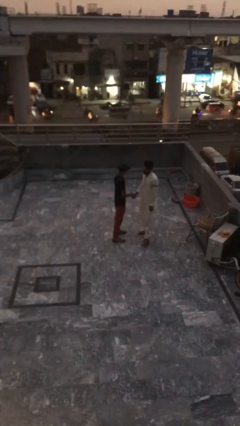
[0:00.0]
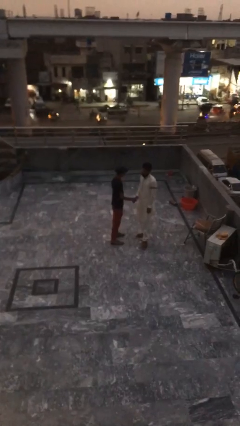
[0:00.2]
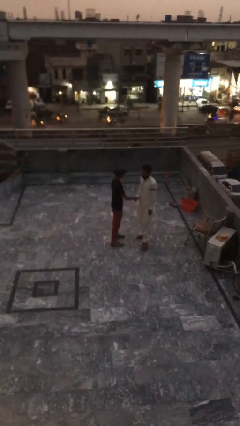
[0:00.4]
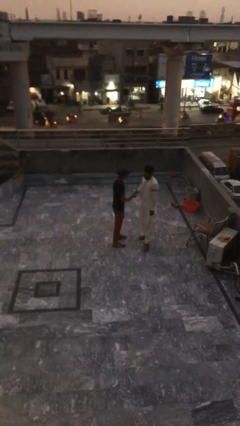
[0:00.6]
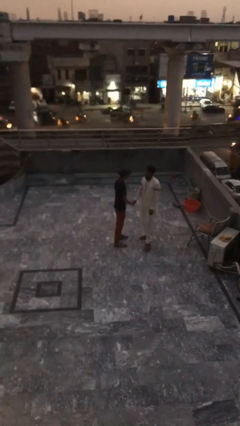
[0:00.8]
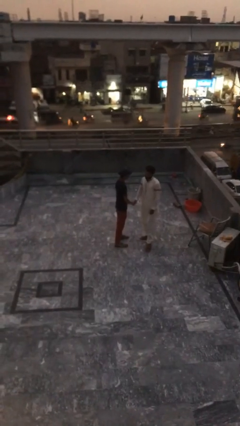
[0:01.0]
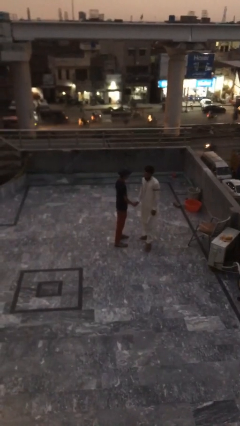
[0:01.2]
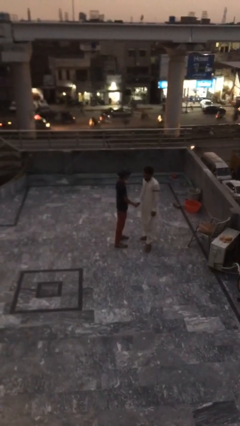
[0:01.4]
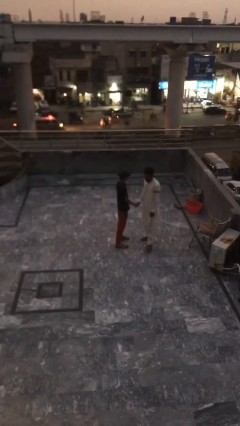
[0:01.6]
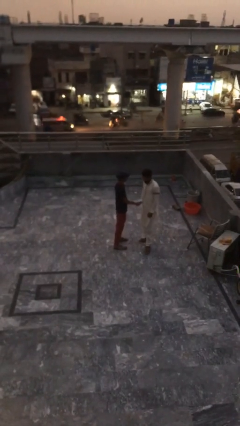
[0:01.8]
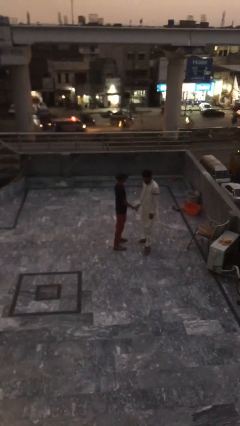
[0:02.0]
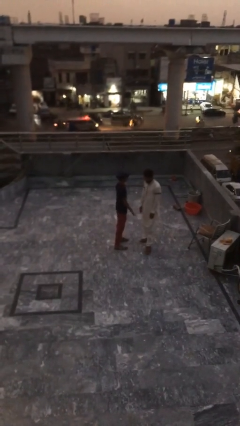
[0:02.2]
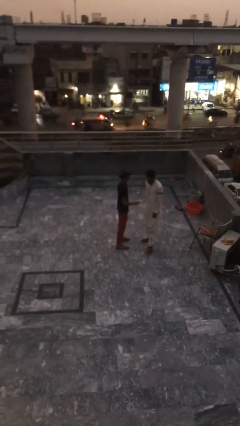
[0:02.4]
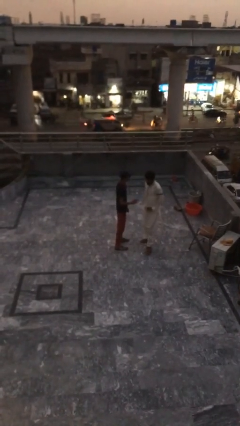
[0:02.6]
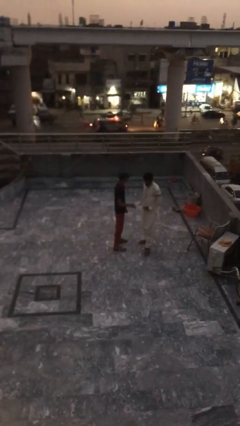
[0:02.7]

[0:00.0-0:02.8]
person shakes hand

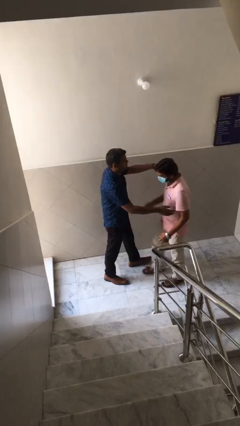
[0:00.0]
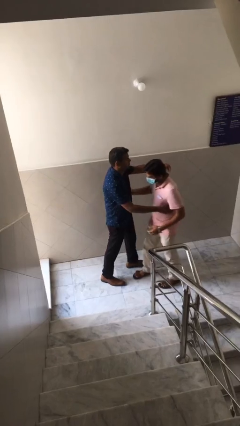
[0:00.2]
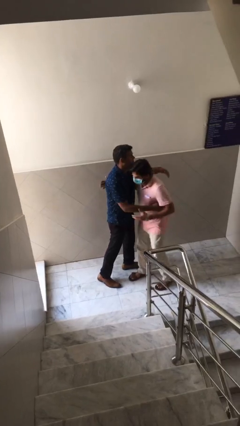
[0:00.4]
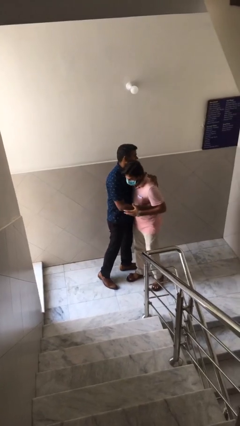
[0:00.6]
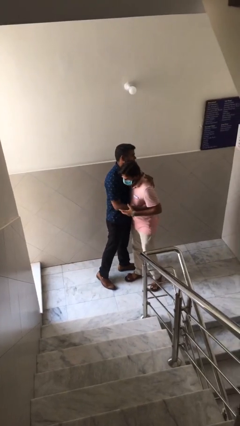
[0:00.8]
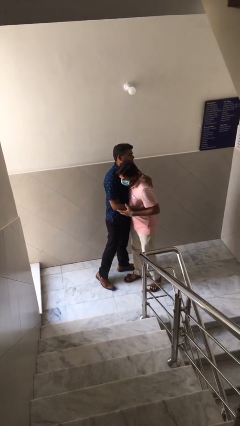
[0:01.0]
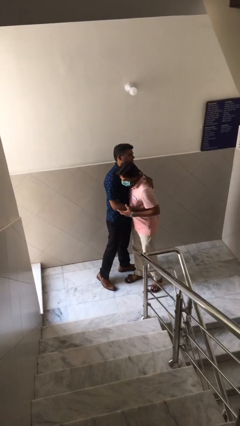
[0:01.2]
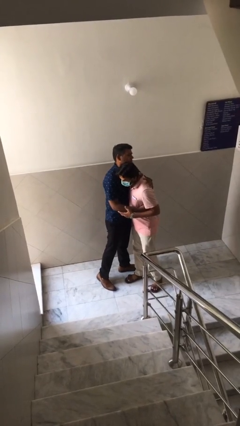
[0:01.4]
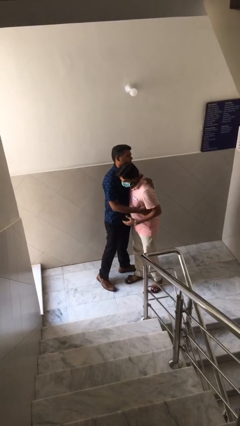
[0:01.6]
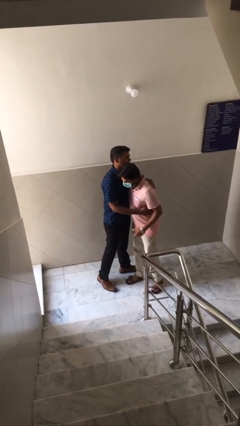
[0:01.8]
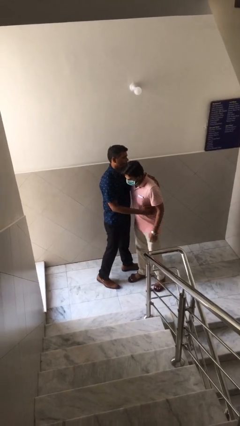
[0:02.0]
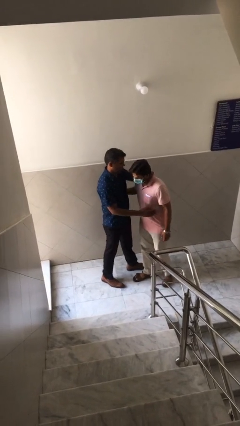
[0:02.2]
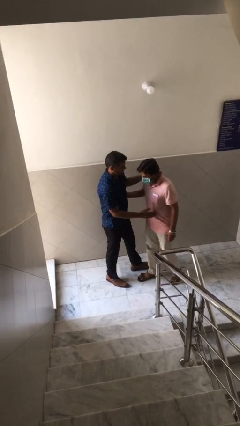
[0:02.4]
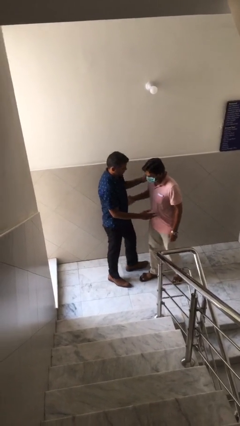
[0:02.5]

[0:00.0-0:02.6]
person embraces person

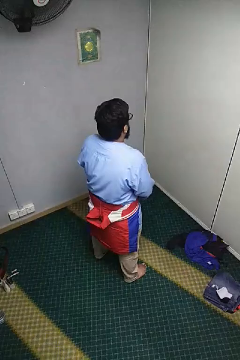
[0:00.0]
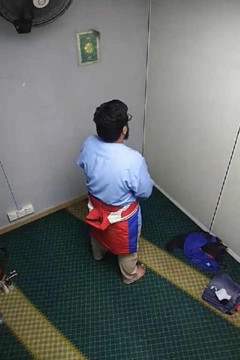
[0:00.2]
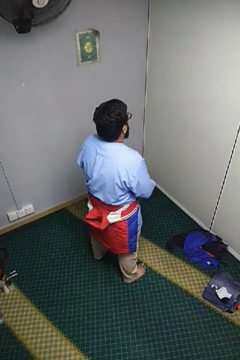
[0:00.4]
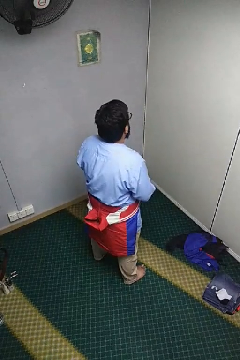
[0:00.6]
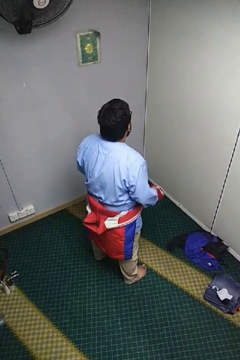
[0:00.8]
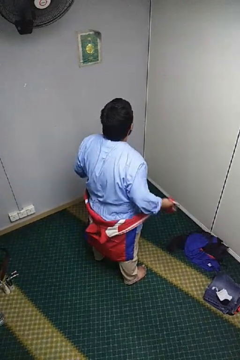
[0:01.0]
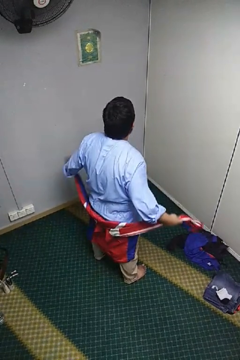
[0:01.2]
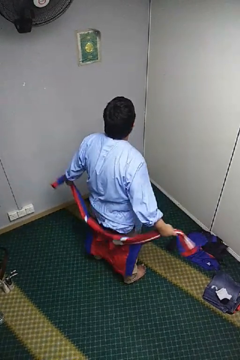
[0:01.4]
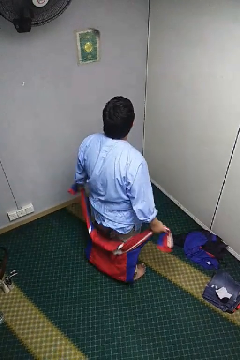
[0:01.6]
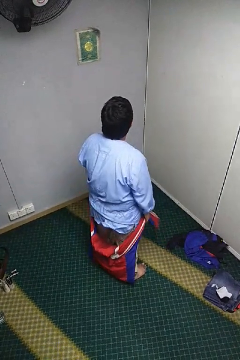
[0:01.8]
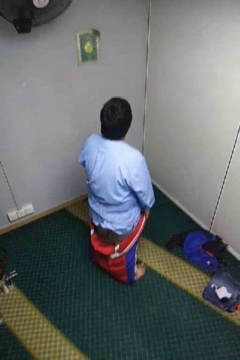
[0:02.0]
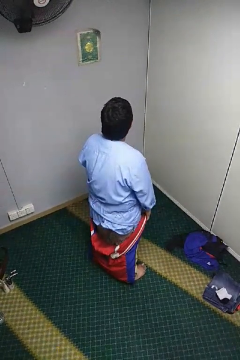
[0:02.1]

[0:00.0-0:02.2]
person unties jacket around waist

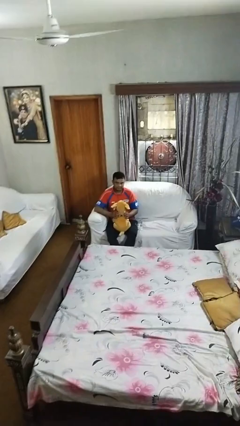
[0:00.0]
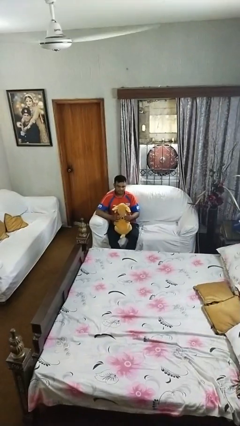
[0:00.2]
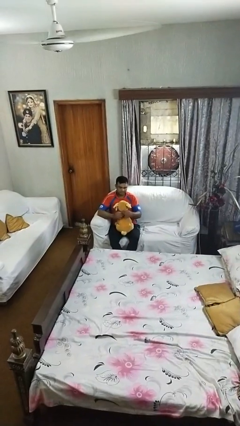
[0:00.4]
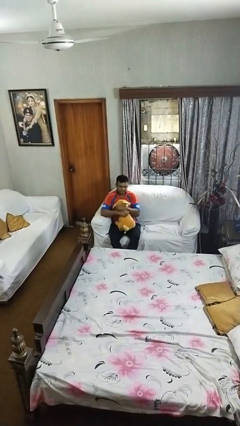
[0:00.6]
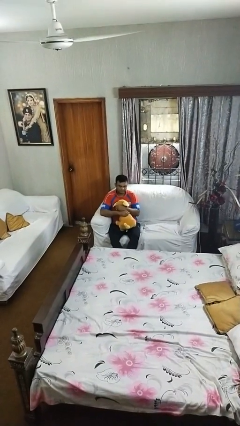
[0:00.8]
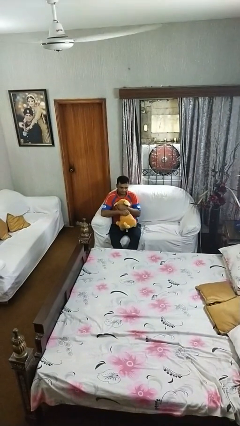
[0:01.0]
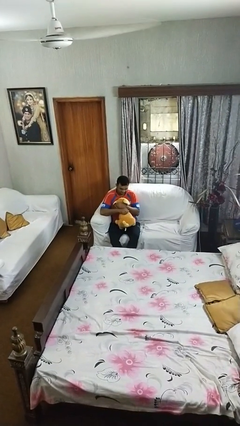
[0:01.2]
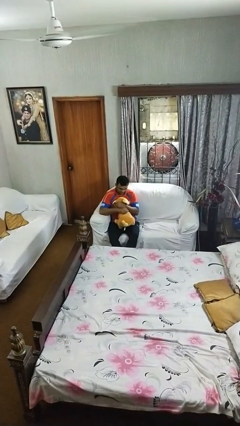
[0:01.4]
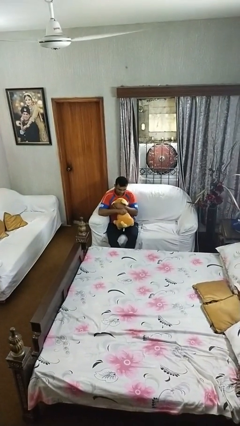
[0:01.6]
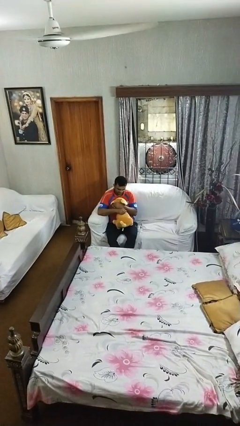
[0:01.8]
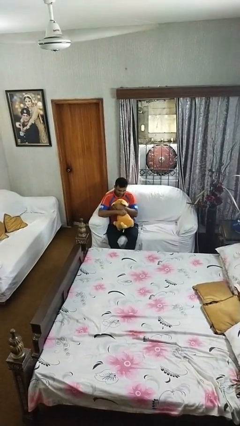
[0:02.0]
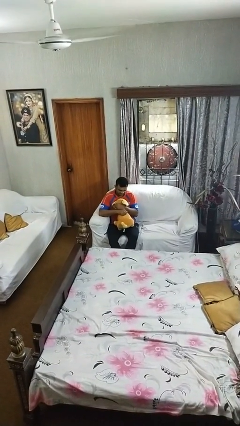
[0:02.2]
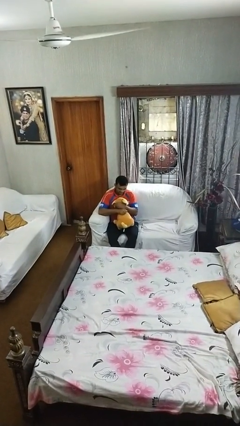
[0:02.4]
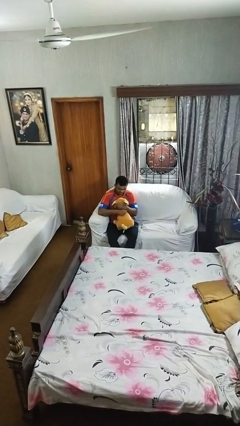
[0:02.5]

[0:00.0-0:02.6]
person hugs stuffed animal

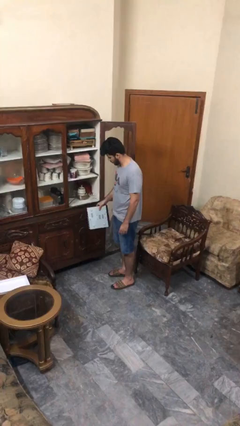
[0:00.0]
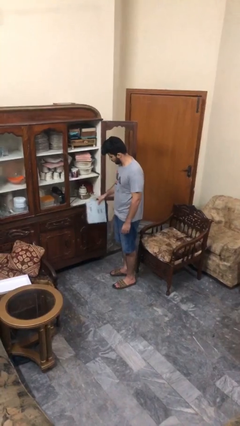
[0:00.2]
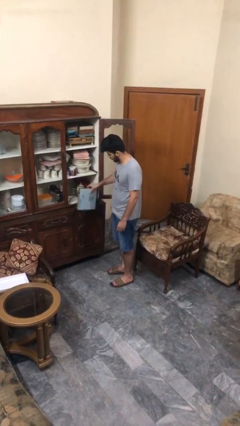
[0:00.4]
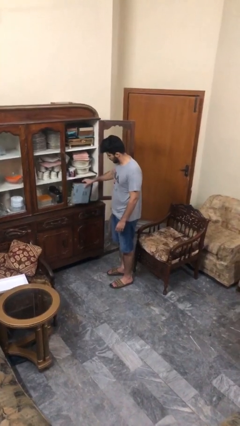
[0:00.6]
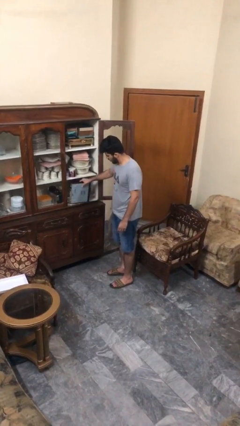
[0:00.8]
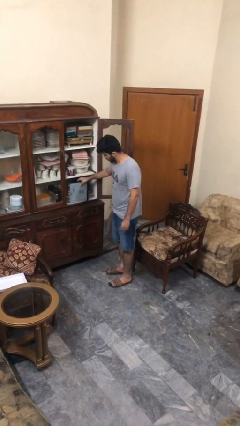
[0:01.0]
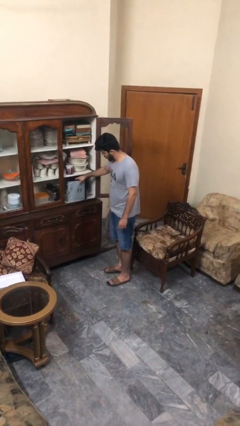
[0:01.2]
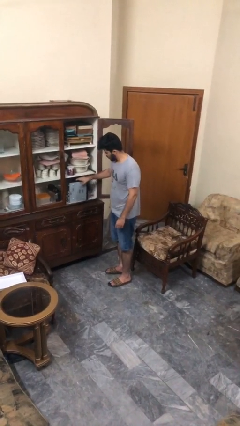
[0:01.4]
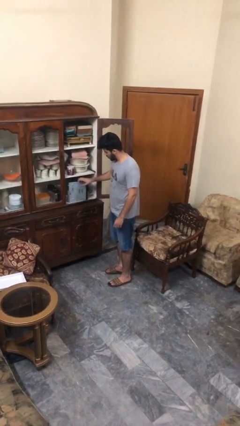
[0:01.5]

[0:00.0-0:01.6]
person puts down object into cabinet

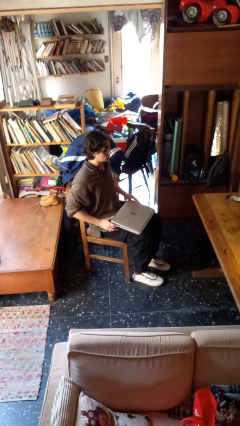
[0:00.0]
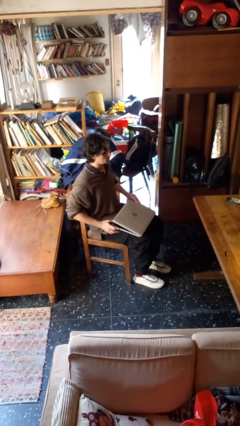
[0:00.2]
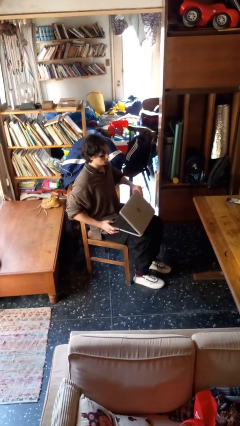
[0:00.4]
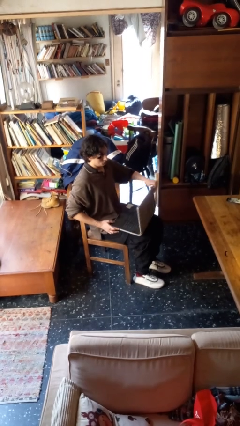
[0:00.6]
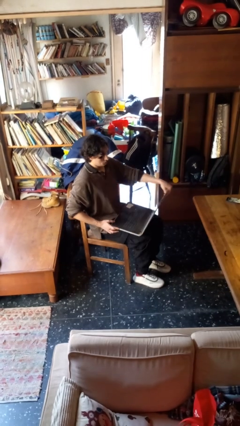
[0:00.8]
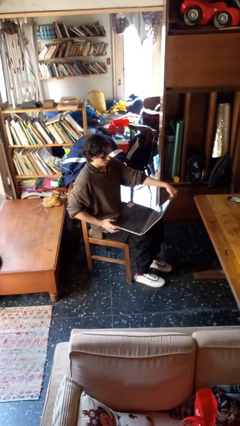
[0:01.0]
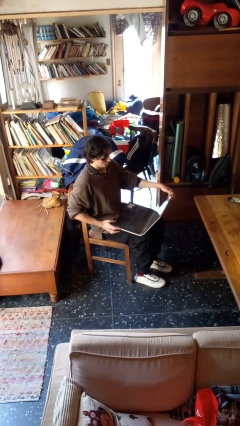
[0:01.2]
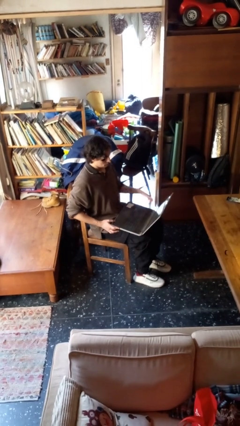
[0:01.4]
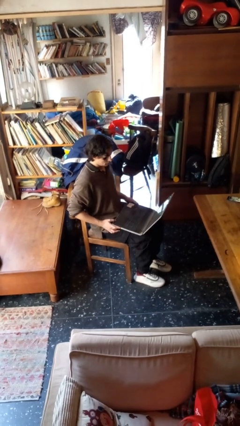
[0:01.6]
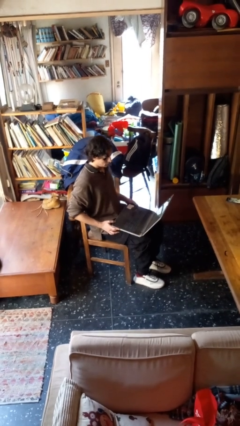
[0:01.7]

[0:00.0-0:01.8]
person opens laptop

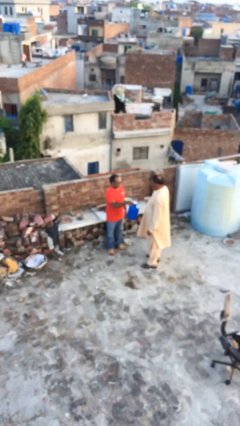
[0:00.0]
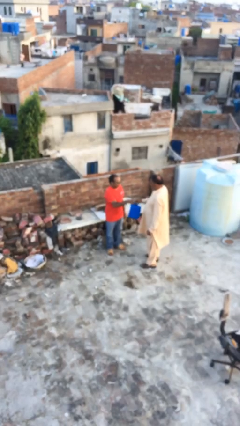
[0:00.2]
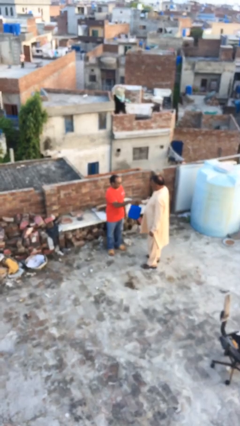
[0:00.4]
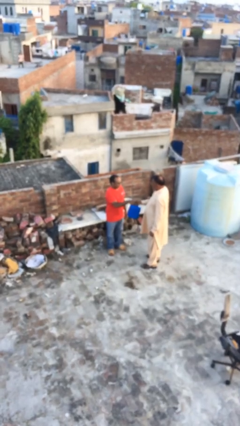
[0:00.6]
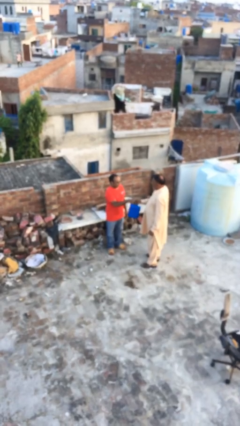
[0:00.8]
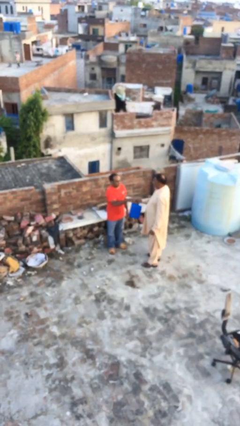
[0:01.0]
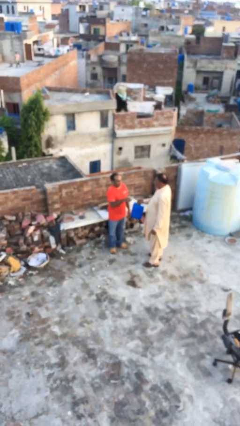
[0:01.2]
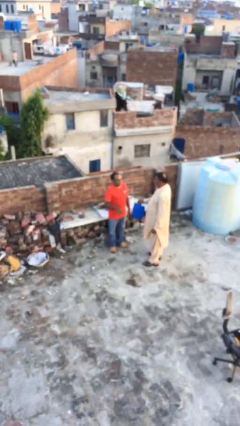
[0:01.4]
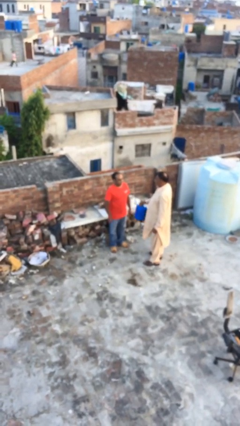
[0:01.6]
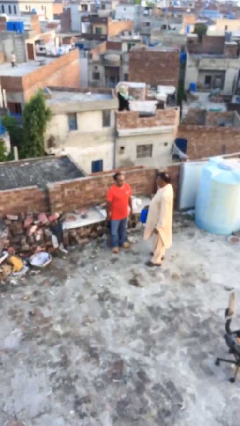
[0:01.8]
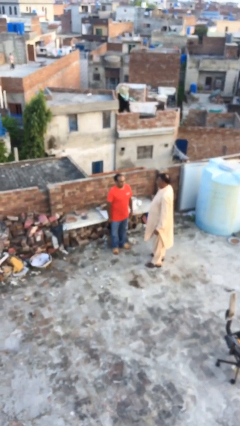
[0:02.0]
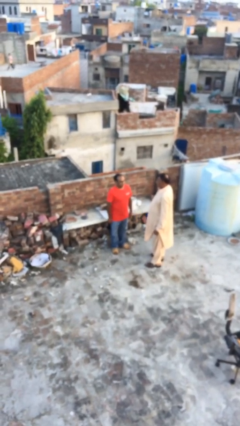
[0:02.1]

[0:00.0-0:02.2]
person transfers object to person

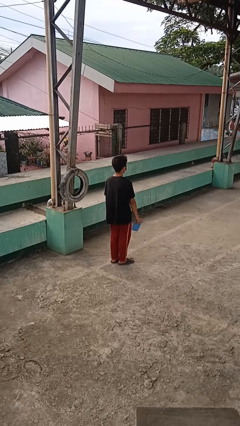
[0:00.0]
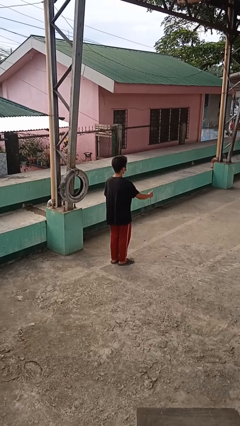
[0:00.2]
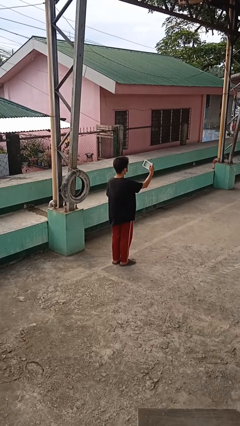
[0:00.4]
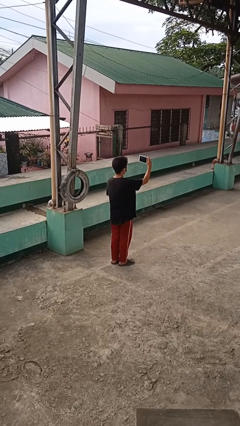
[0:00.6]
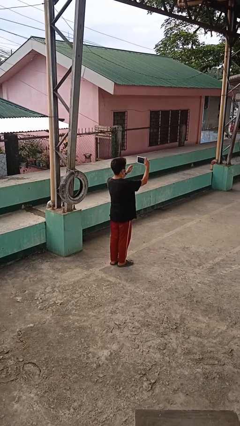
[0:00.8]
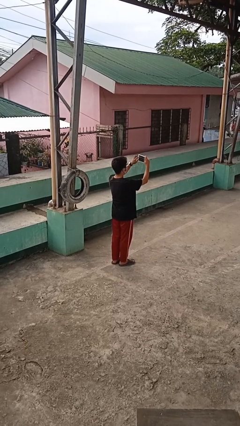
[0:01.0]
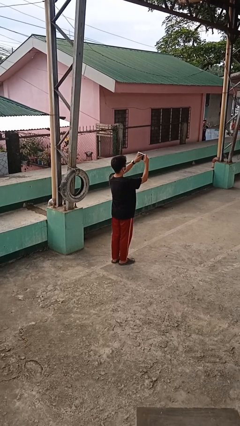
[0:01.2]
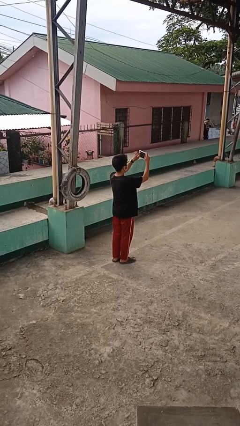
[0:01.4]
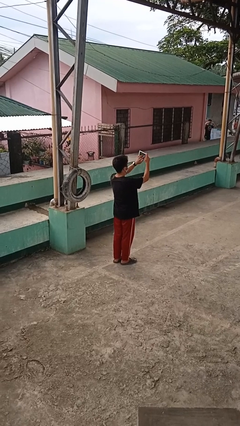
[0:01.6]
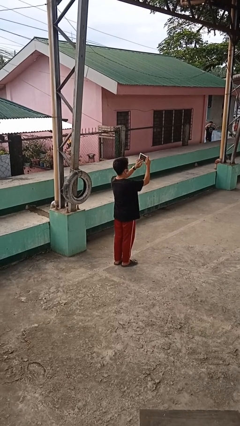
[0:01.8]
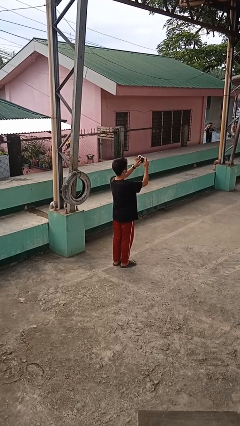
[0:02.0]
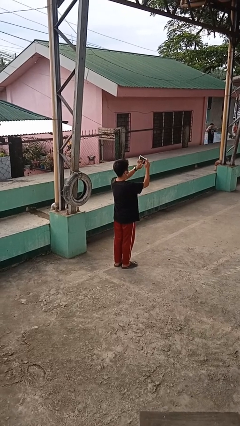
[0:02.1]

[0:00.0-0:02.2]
person interacts with tablet
